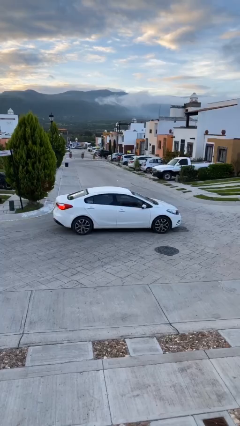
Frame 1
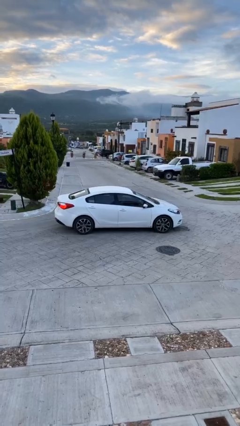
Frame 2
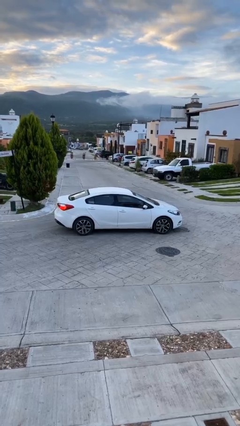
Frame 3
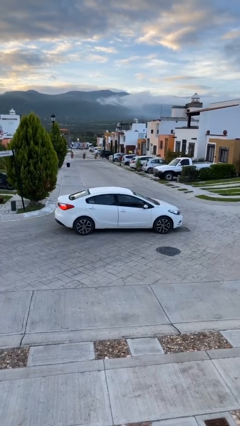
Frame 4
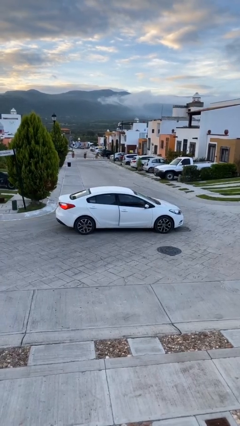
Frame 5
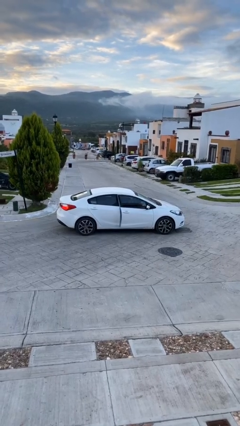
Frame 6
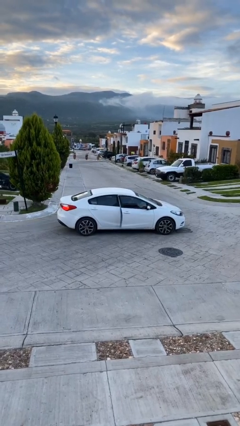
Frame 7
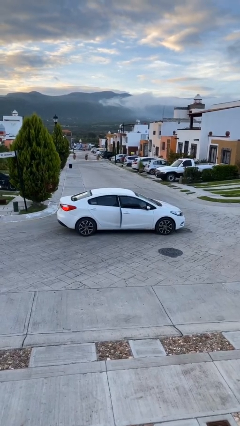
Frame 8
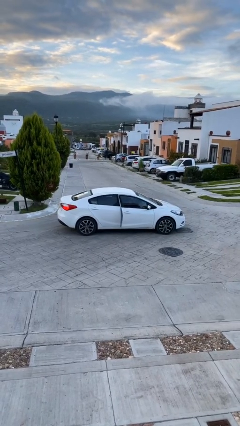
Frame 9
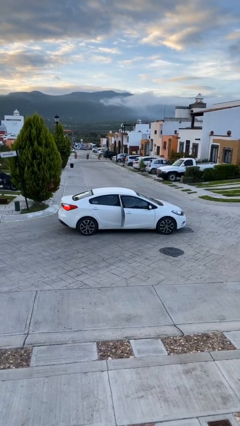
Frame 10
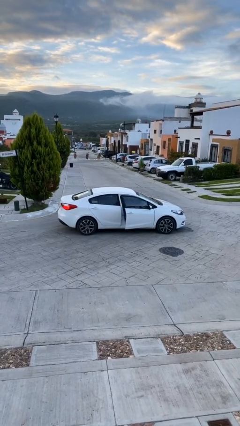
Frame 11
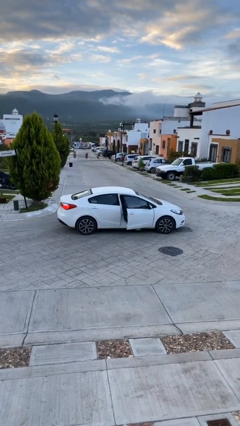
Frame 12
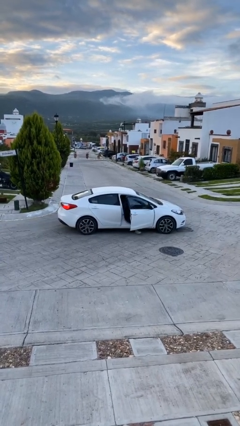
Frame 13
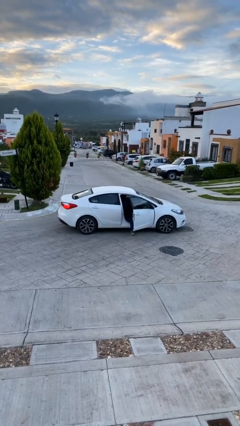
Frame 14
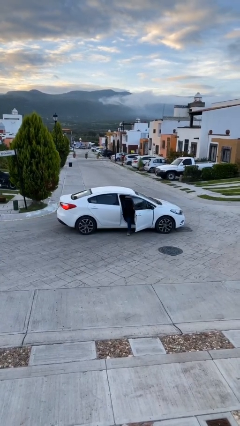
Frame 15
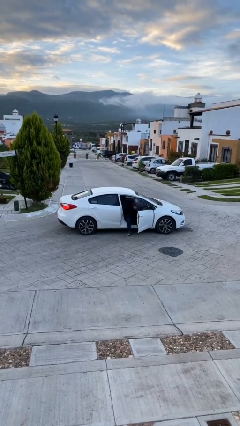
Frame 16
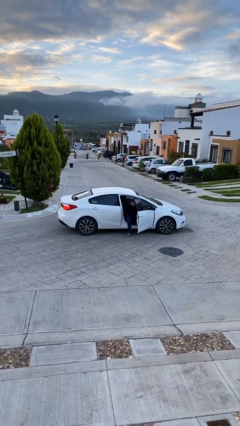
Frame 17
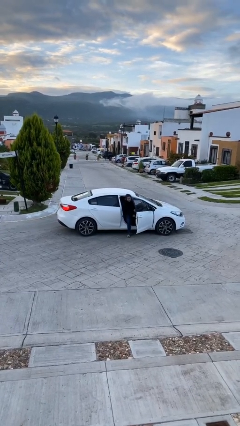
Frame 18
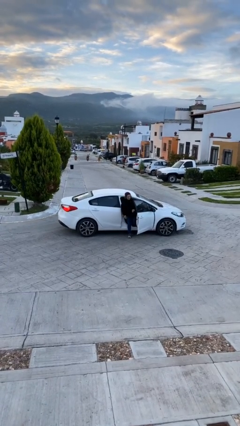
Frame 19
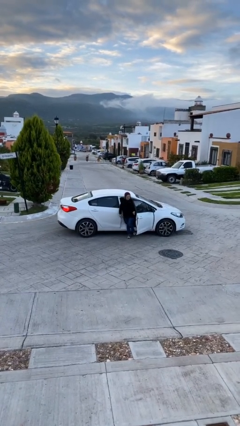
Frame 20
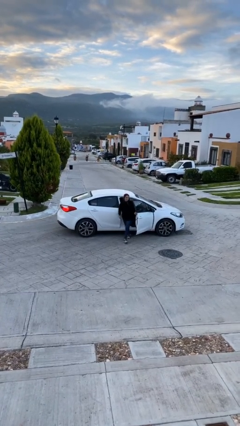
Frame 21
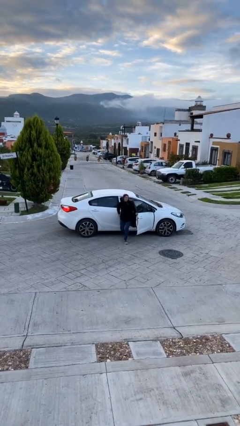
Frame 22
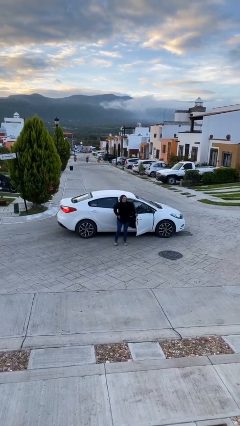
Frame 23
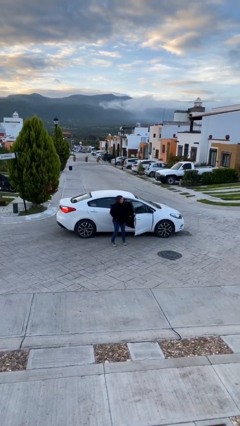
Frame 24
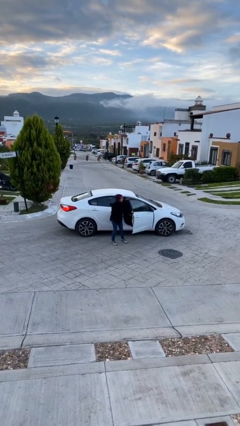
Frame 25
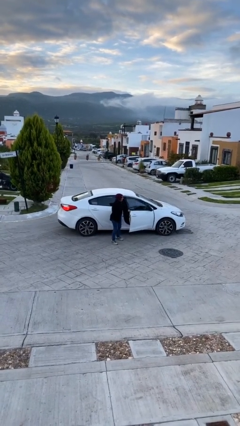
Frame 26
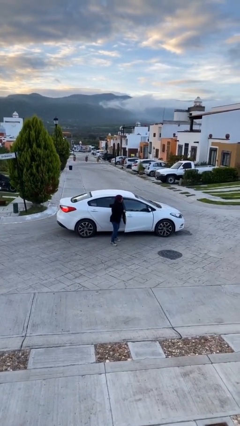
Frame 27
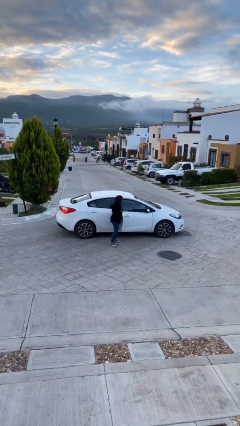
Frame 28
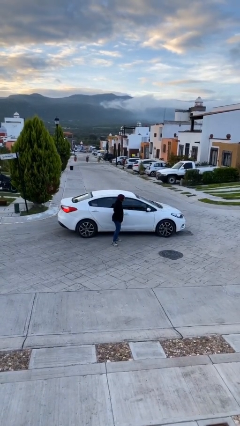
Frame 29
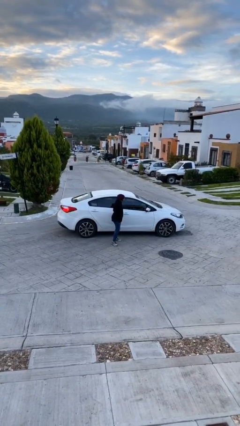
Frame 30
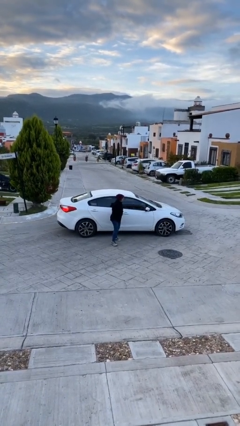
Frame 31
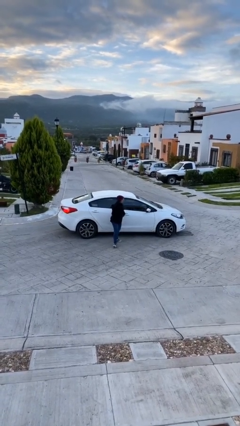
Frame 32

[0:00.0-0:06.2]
car drops off person

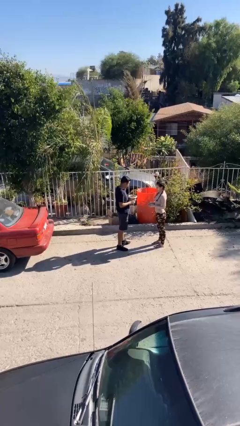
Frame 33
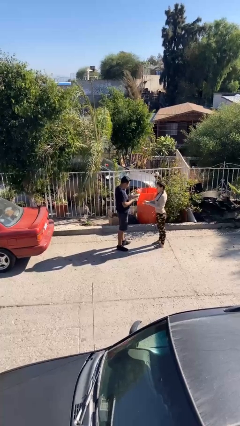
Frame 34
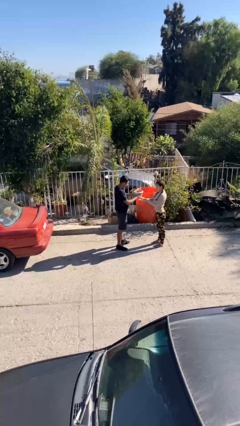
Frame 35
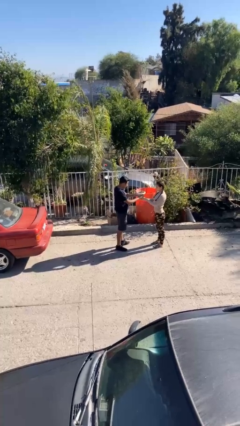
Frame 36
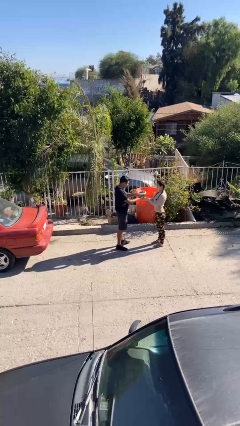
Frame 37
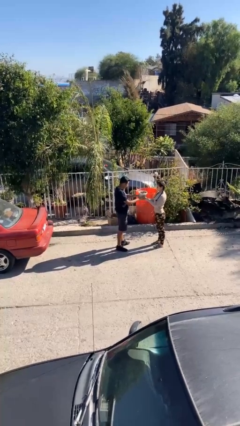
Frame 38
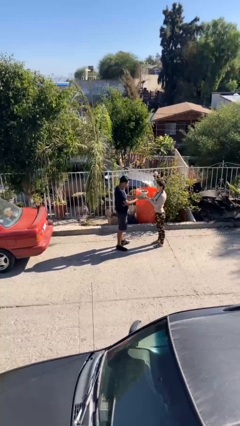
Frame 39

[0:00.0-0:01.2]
person transfers object to person

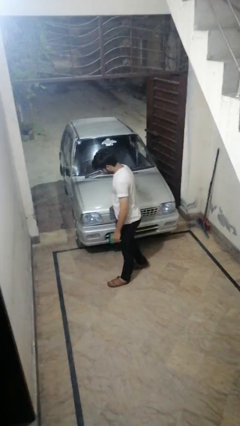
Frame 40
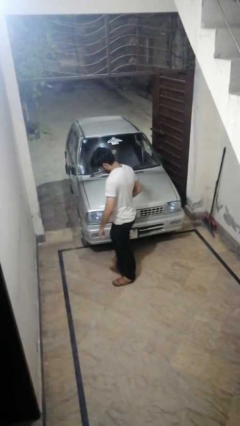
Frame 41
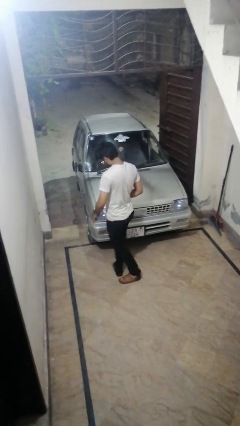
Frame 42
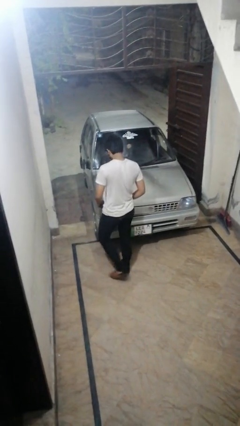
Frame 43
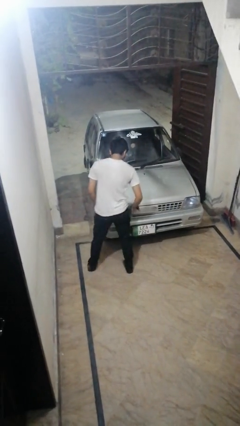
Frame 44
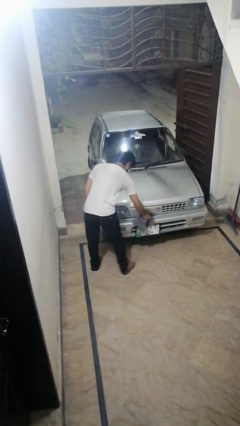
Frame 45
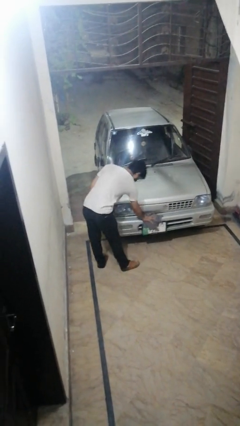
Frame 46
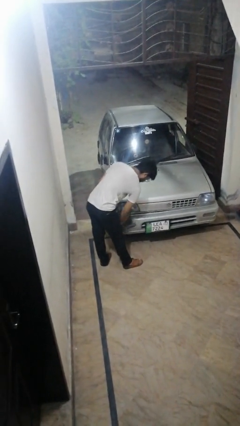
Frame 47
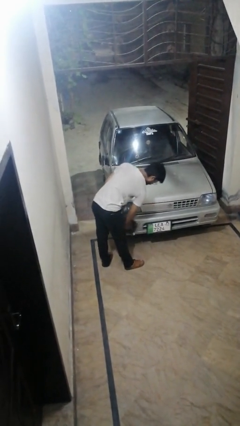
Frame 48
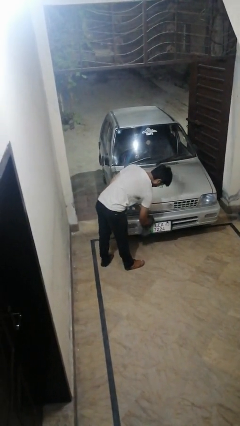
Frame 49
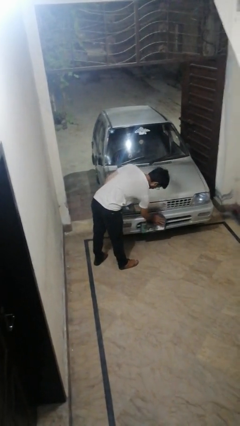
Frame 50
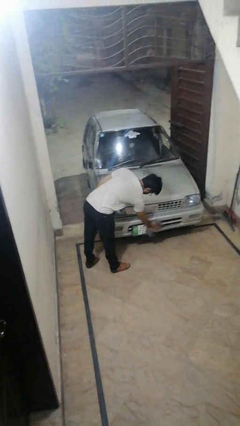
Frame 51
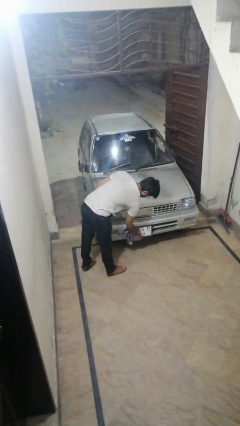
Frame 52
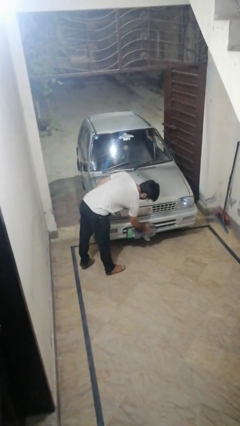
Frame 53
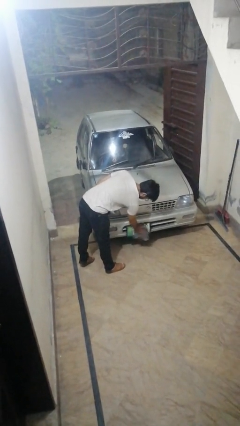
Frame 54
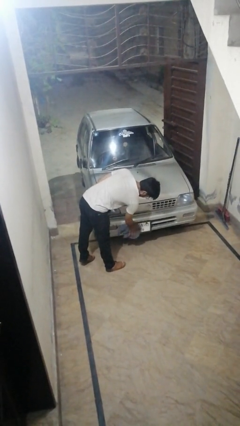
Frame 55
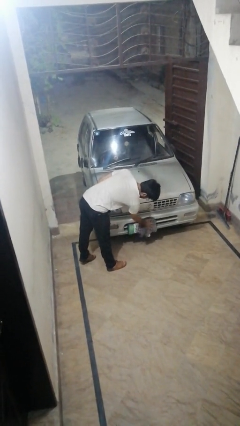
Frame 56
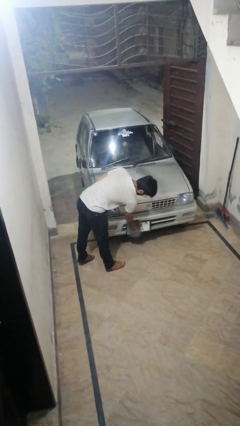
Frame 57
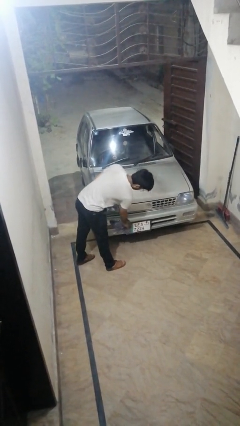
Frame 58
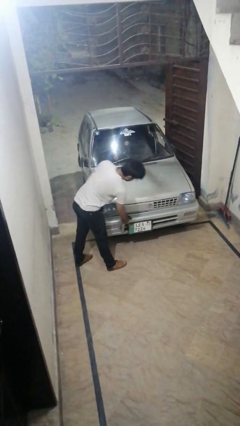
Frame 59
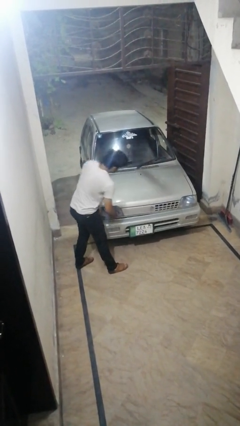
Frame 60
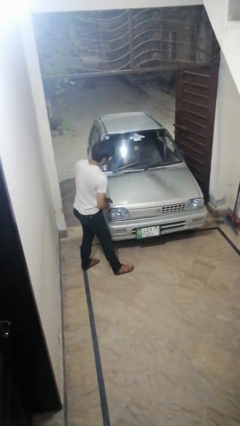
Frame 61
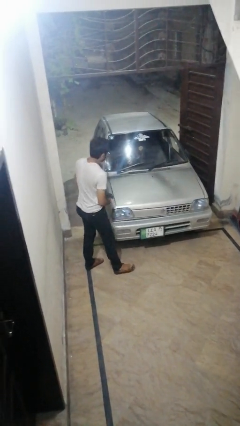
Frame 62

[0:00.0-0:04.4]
person polishes car with rag

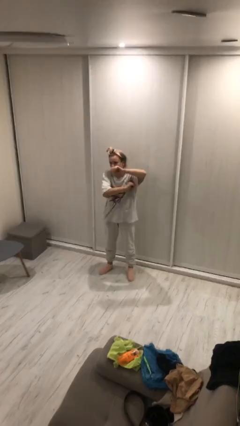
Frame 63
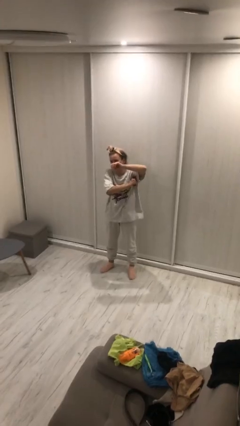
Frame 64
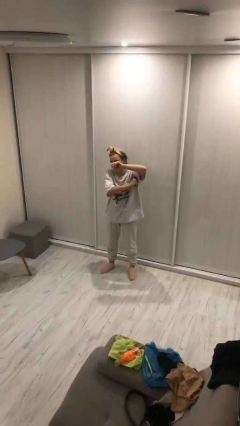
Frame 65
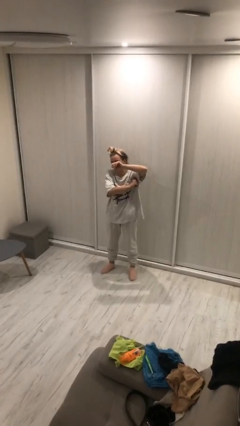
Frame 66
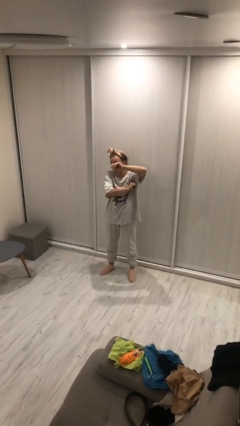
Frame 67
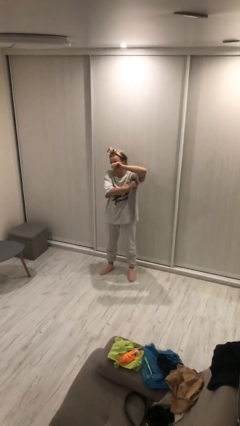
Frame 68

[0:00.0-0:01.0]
person applies deodorant

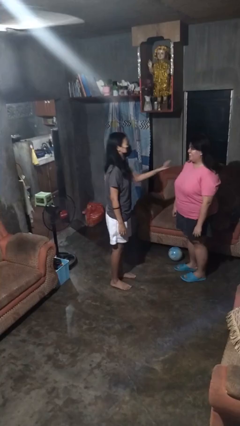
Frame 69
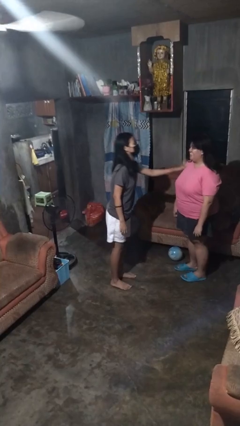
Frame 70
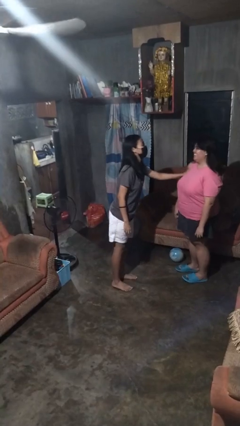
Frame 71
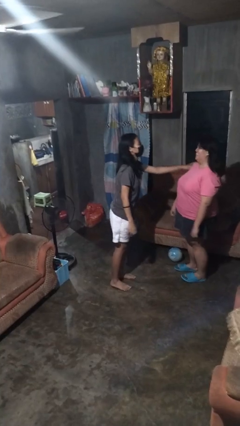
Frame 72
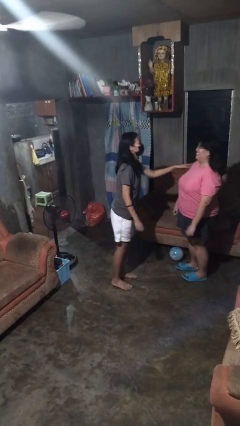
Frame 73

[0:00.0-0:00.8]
person shoves person

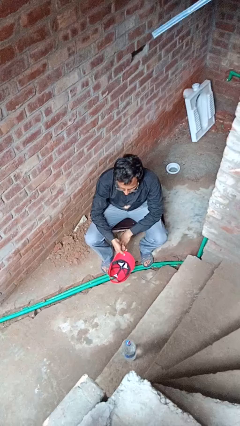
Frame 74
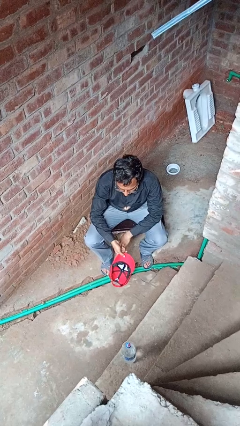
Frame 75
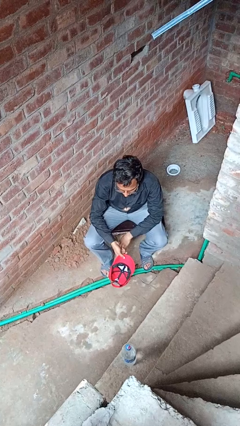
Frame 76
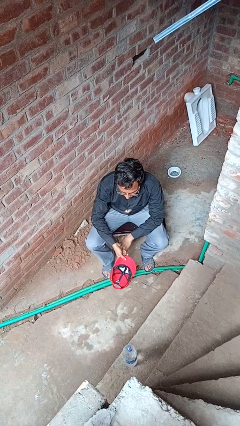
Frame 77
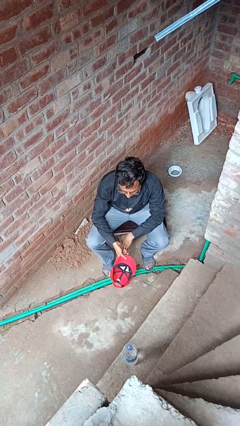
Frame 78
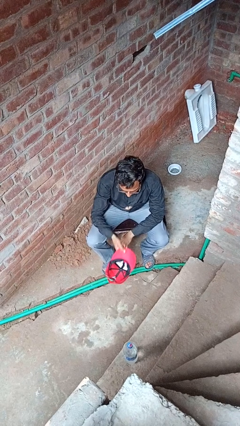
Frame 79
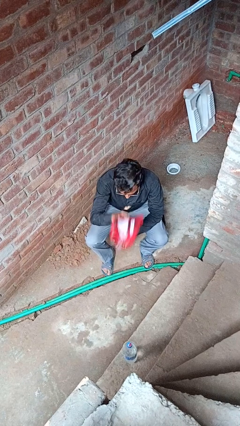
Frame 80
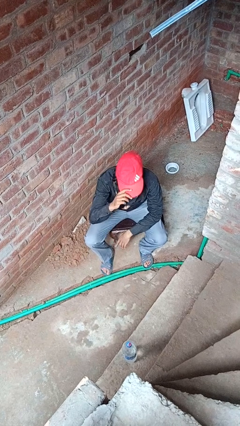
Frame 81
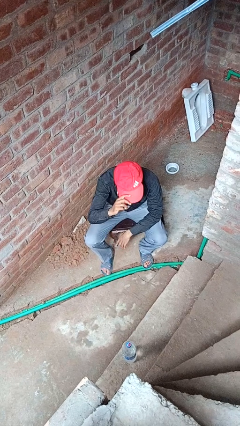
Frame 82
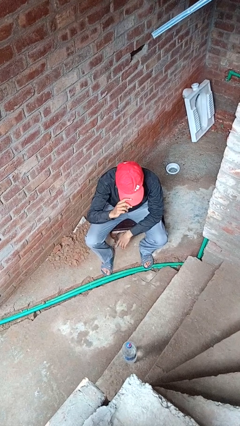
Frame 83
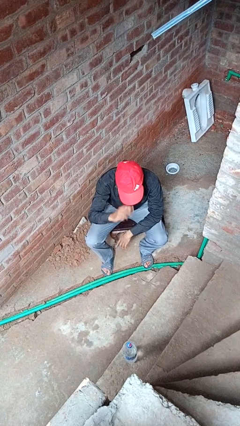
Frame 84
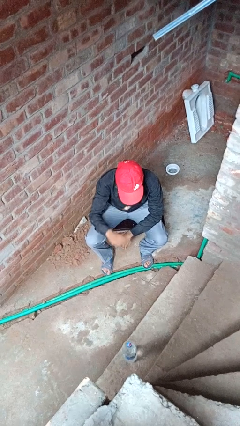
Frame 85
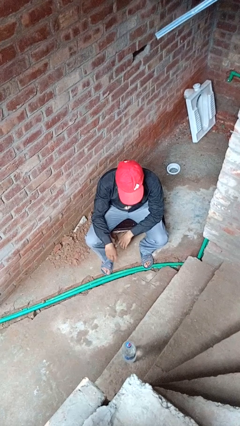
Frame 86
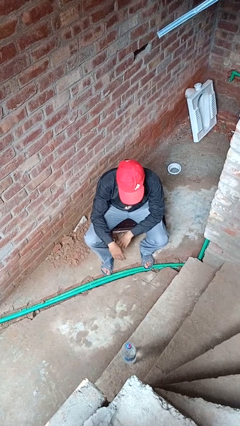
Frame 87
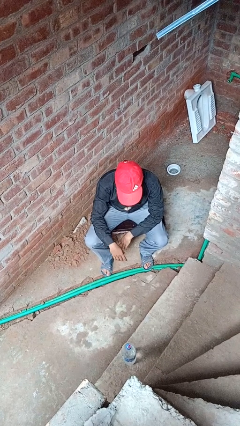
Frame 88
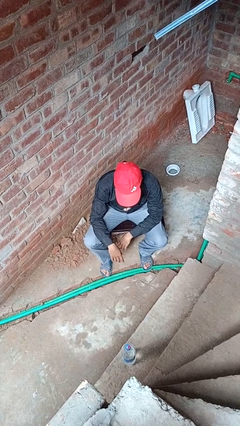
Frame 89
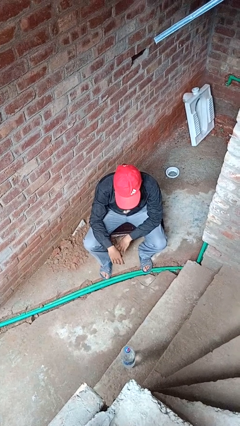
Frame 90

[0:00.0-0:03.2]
person puts on hat

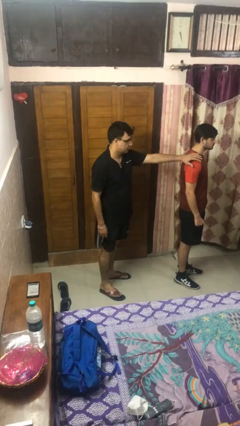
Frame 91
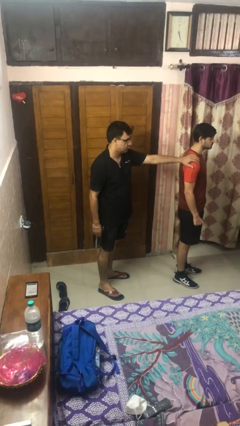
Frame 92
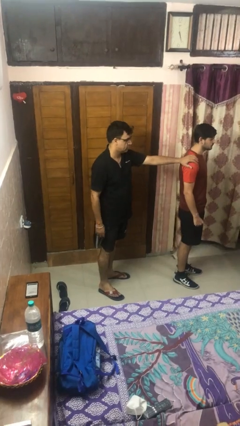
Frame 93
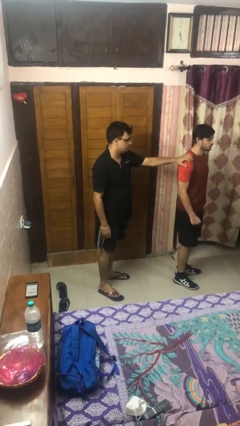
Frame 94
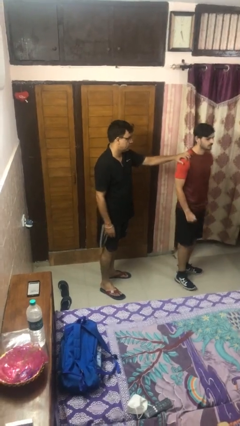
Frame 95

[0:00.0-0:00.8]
person grabs person by shoulder
